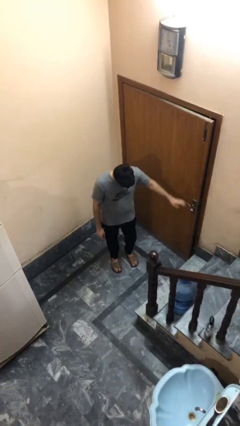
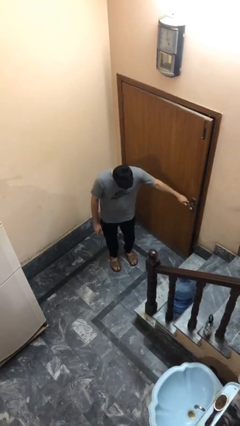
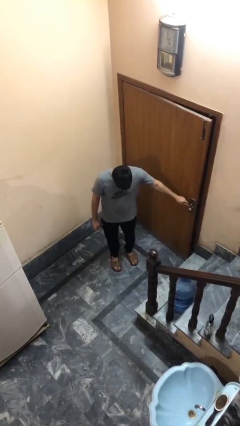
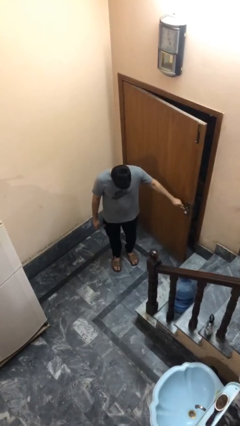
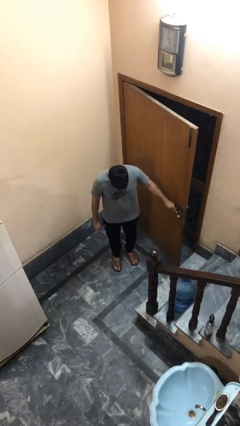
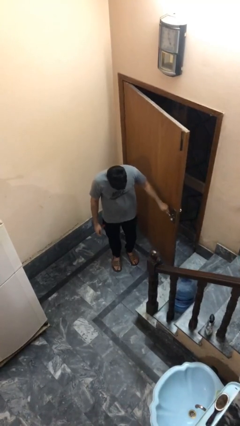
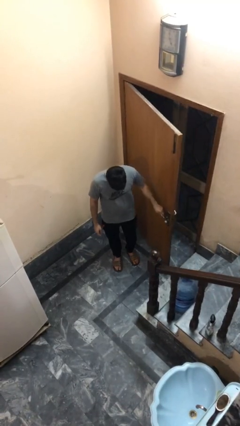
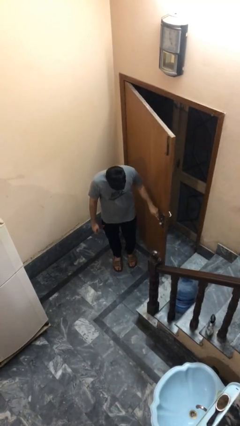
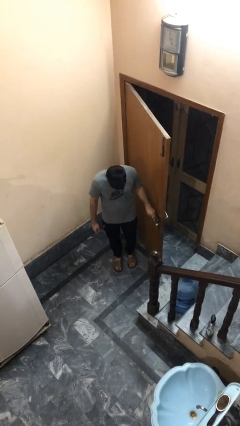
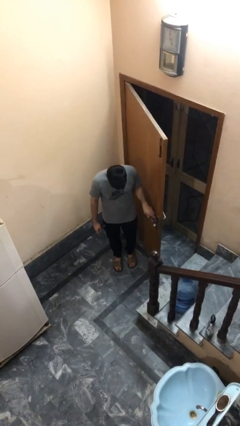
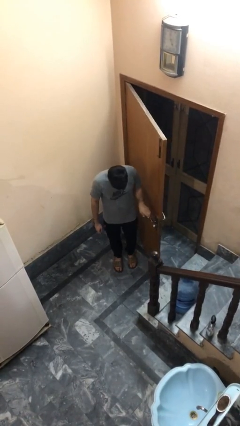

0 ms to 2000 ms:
person opens facility door

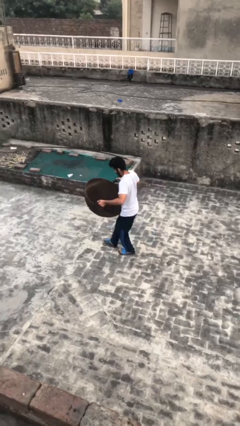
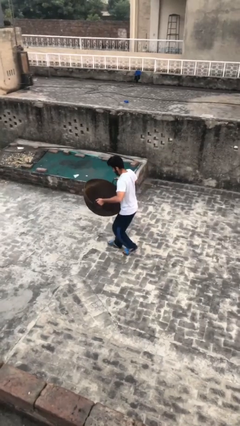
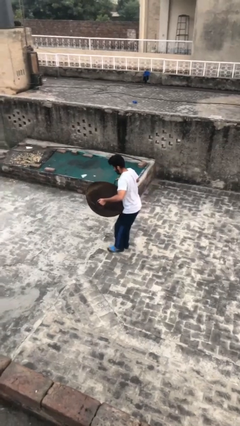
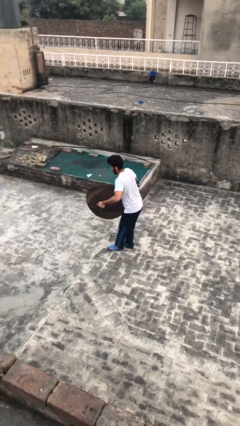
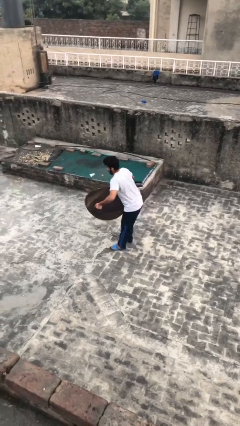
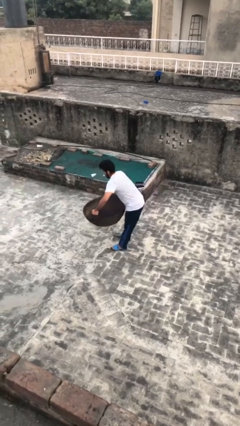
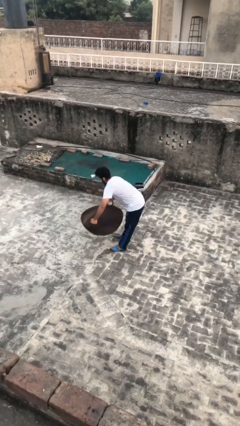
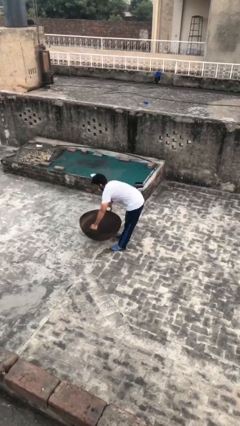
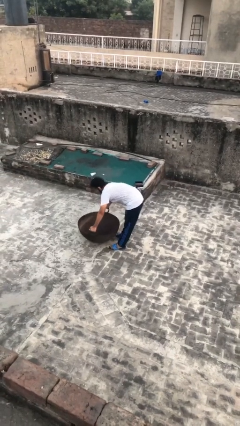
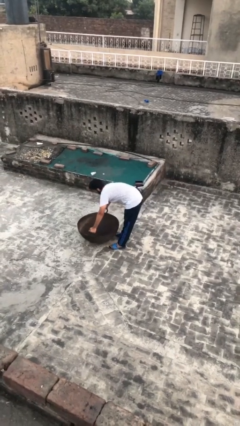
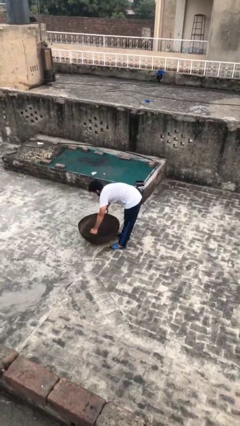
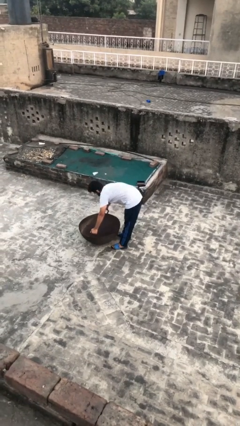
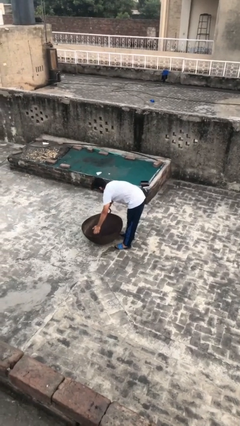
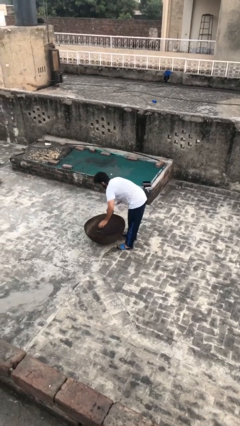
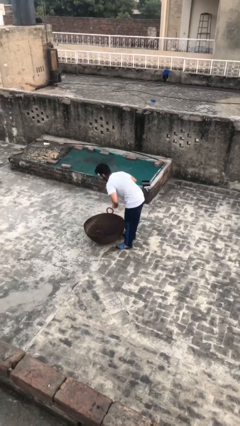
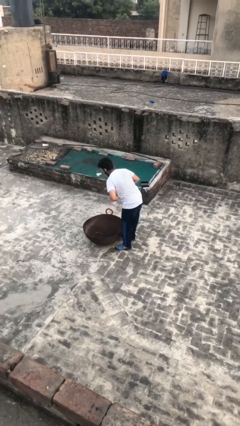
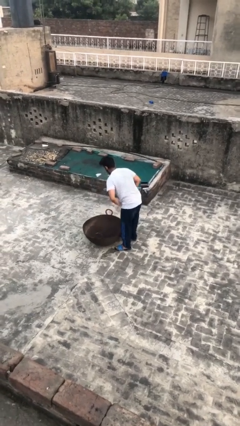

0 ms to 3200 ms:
person puts down object on floor

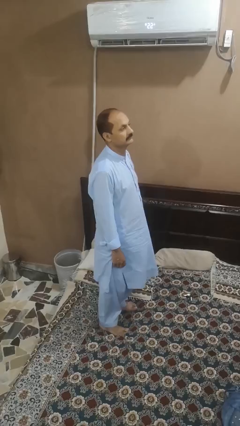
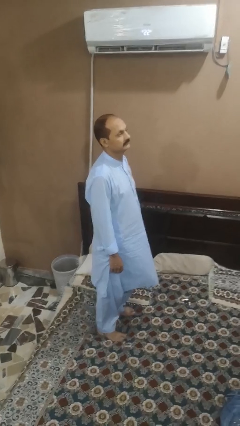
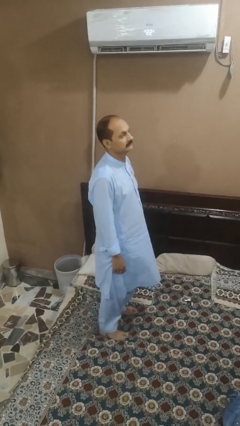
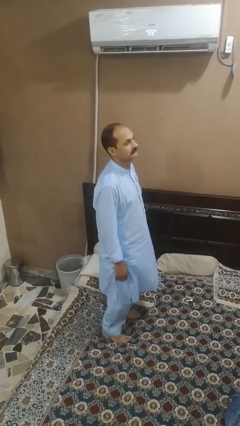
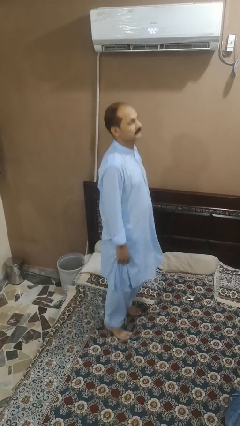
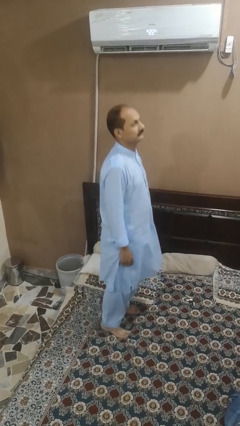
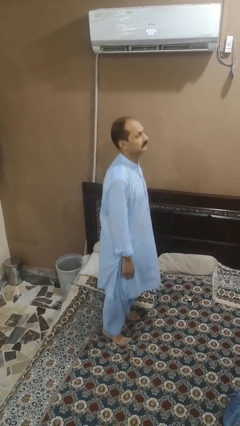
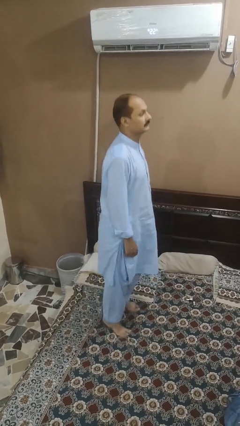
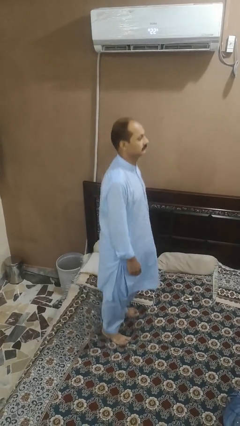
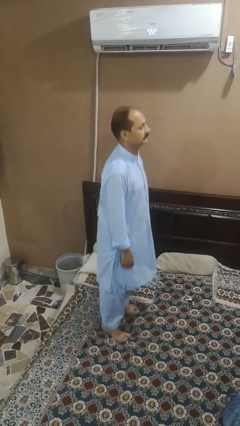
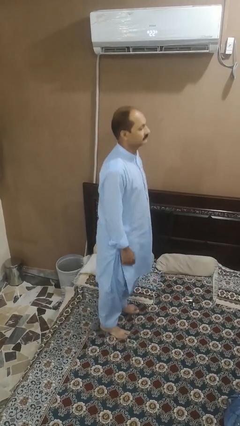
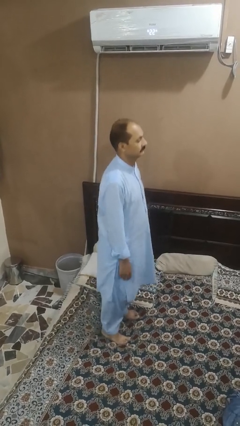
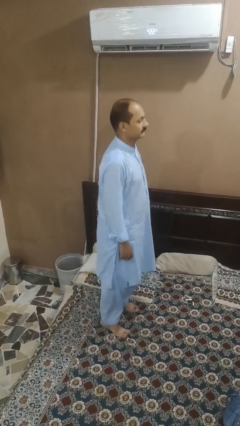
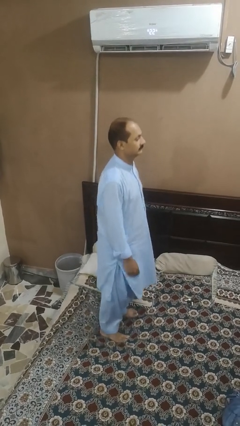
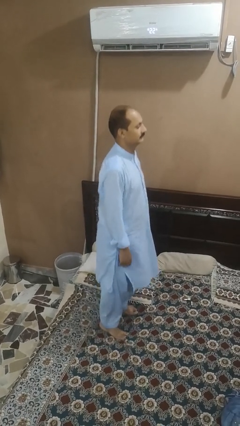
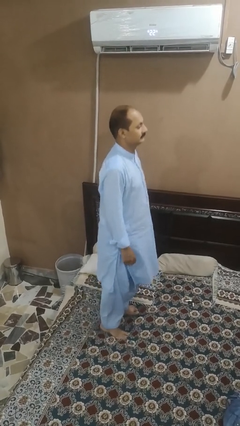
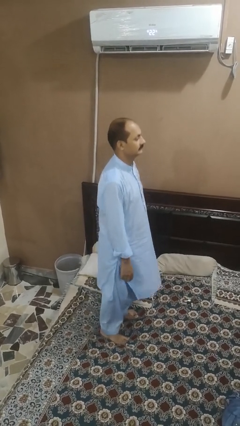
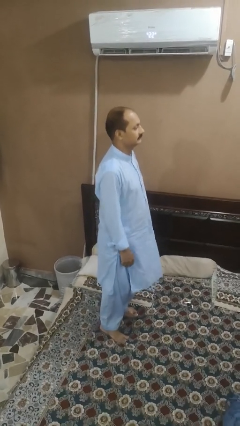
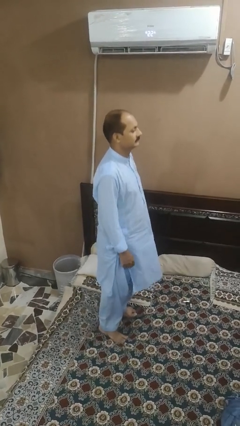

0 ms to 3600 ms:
person jumps on bed

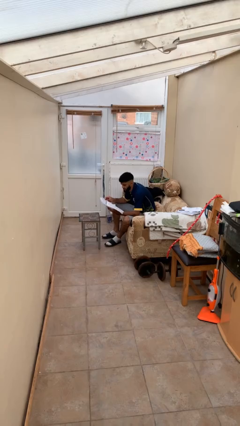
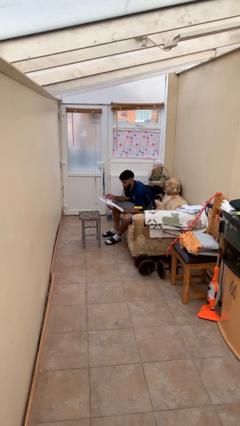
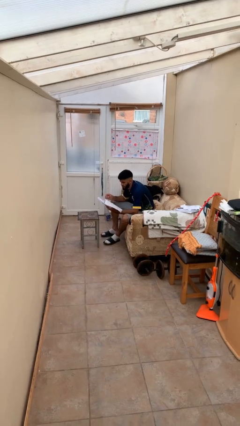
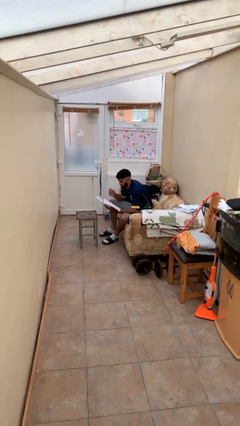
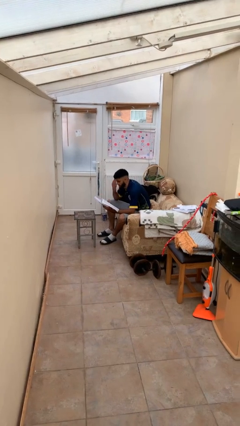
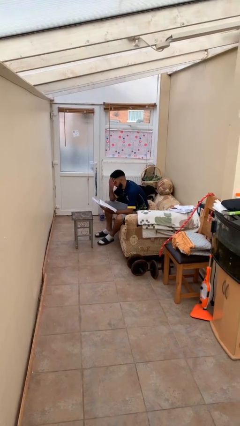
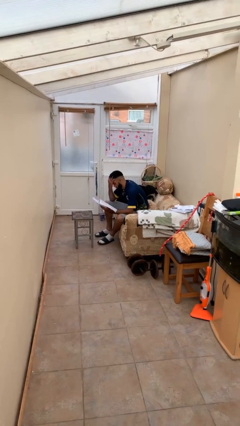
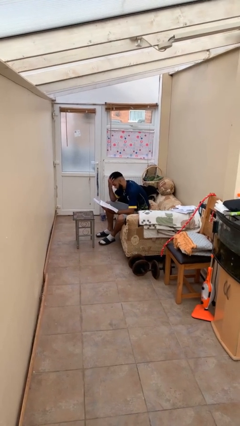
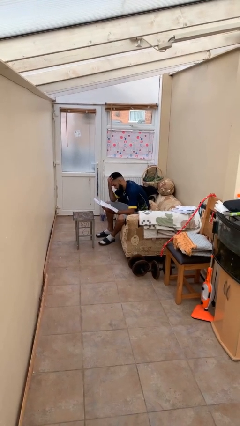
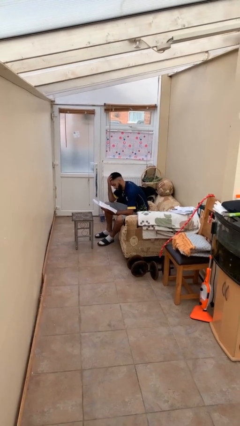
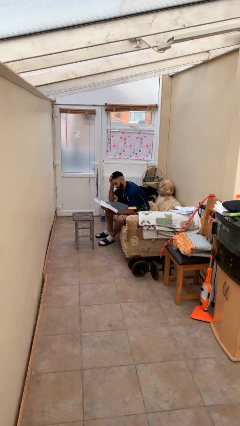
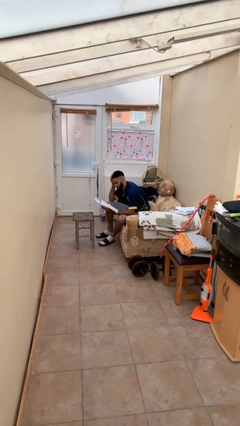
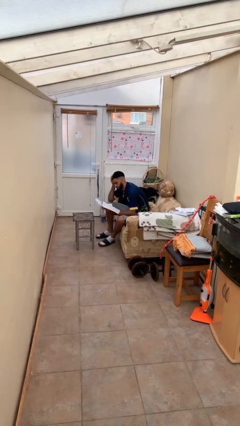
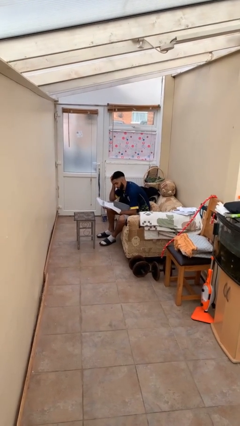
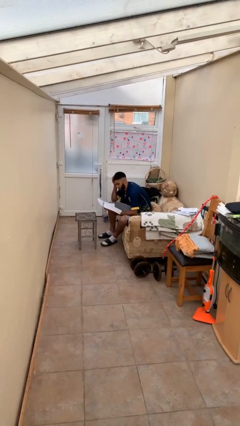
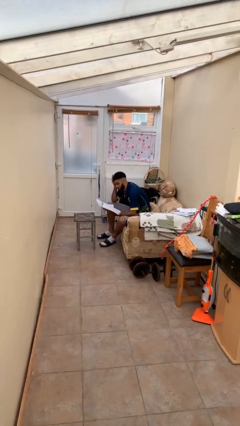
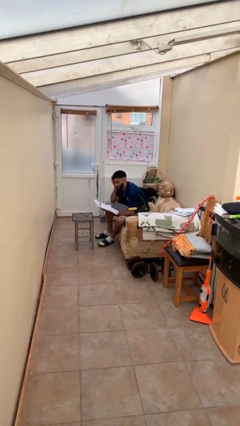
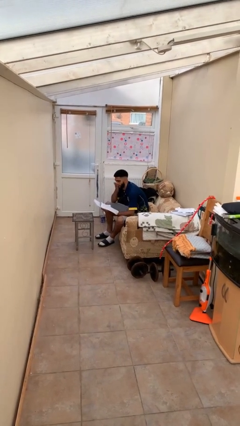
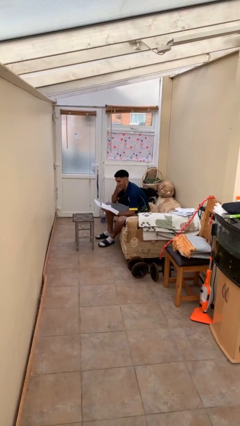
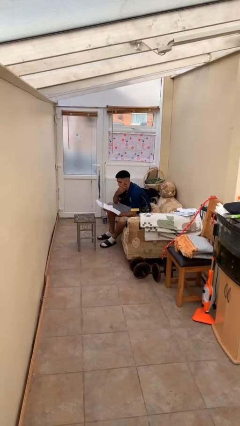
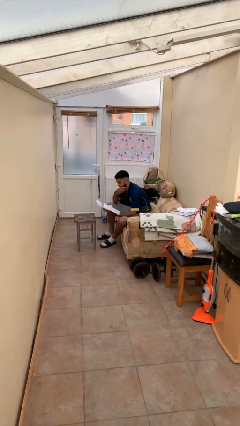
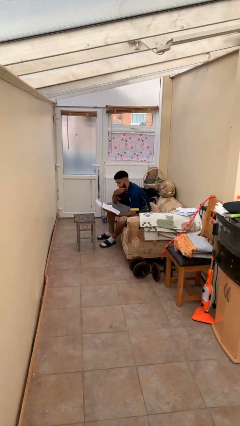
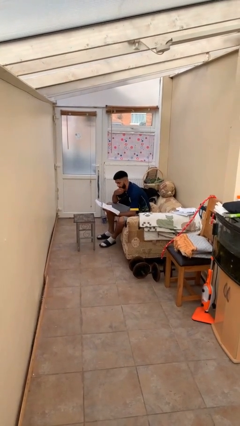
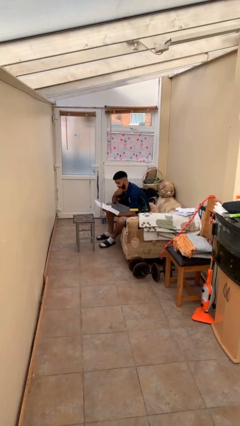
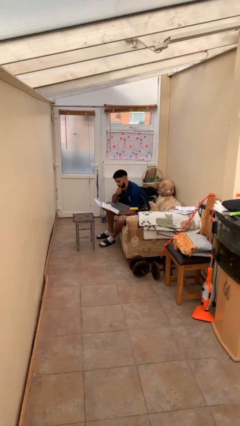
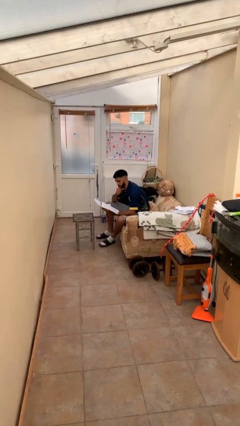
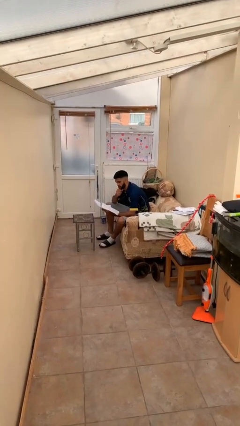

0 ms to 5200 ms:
person reads document

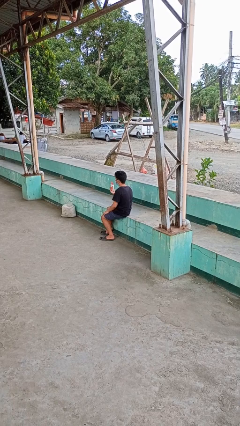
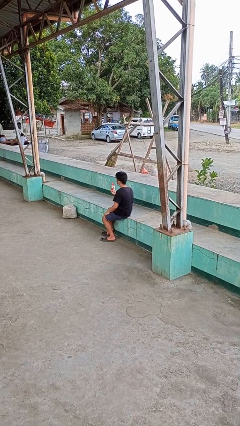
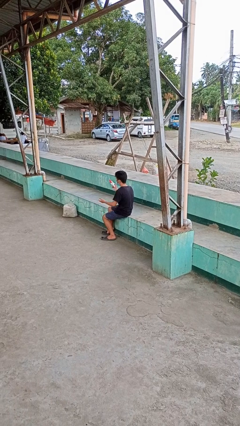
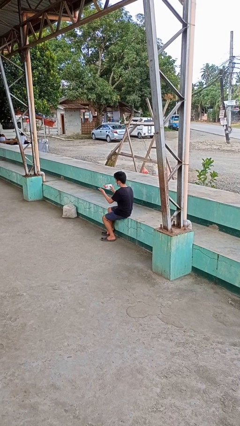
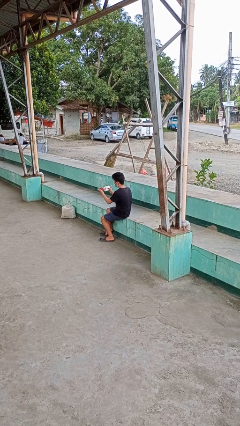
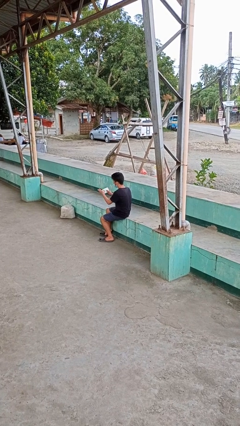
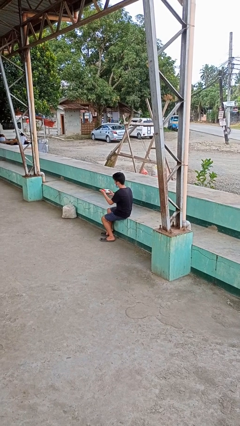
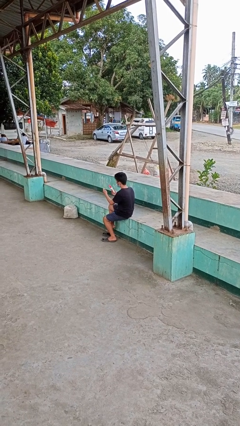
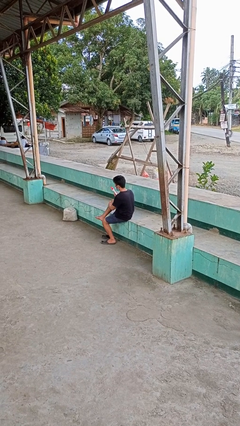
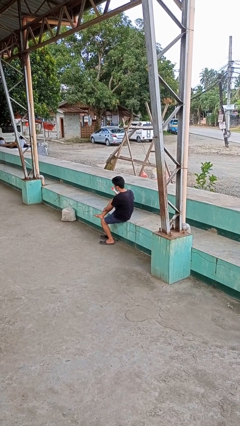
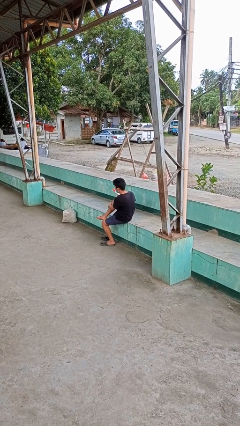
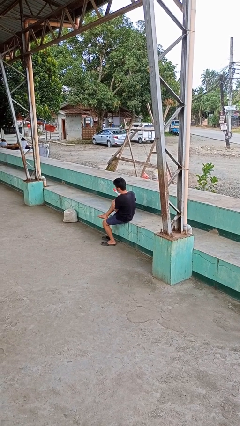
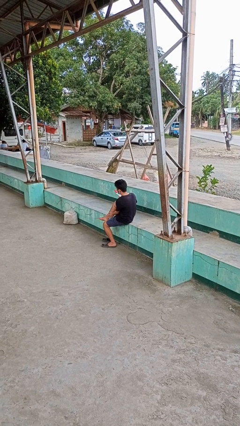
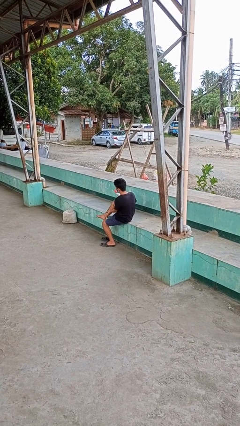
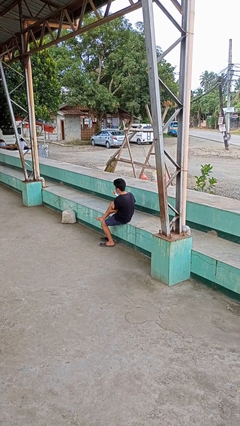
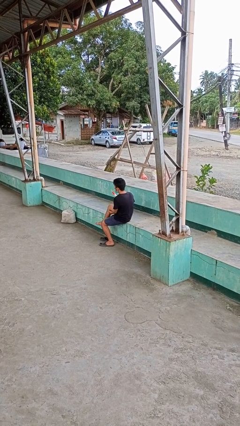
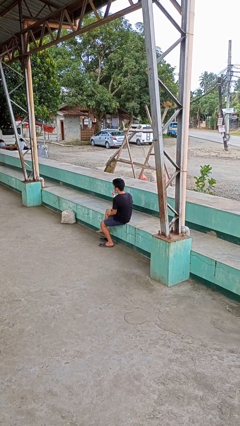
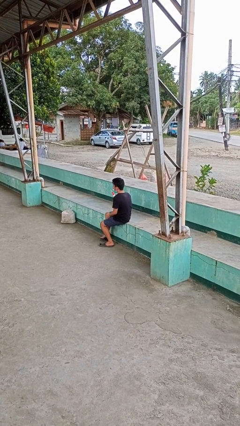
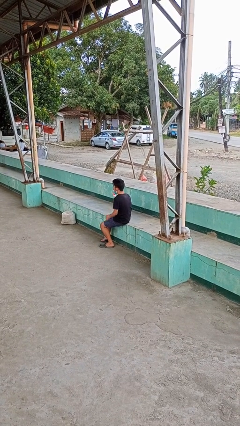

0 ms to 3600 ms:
person applies sunscreen
